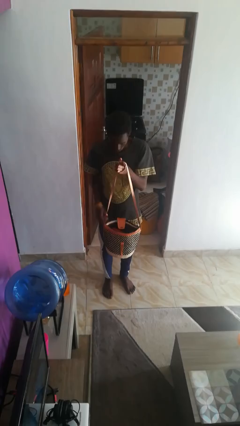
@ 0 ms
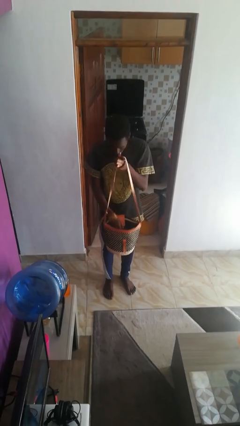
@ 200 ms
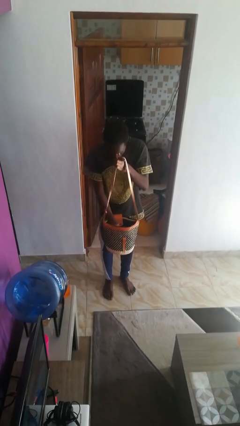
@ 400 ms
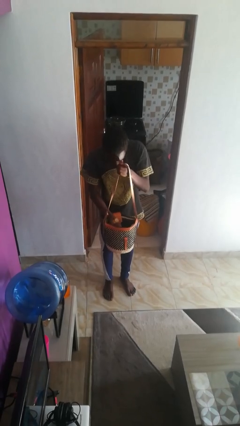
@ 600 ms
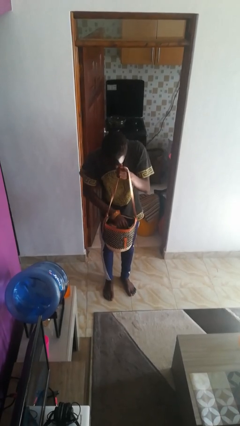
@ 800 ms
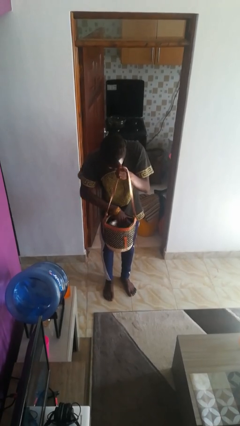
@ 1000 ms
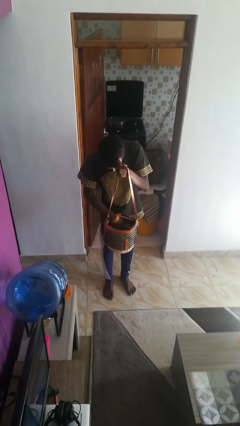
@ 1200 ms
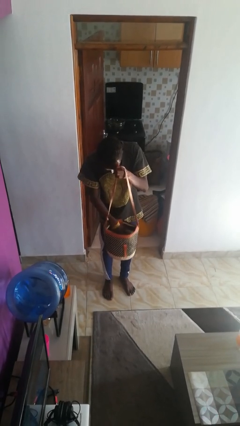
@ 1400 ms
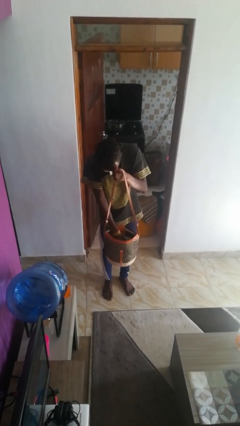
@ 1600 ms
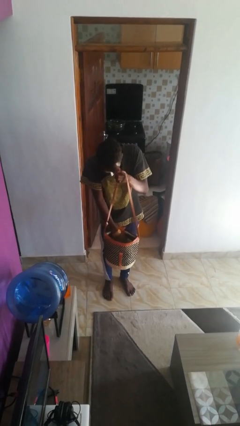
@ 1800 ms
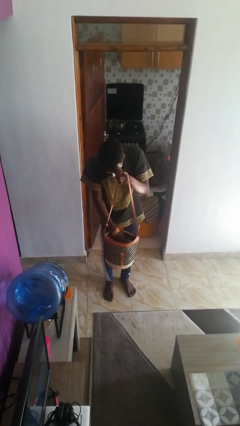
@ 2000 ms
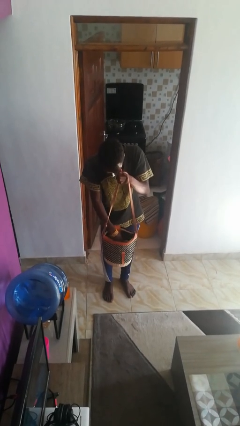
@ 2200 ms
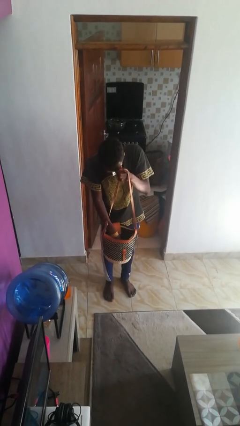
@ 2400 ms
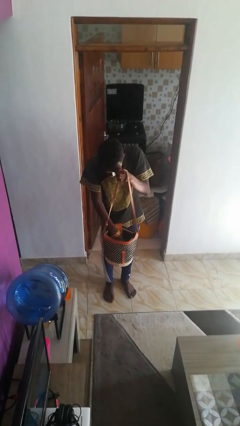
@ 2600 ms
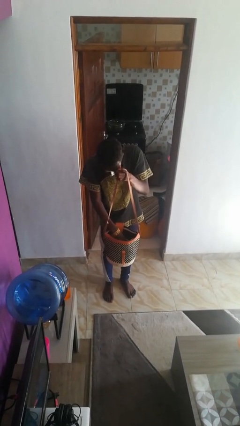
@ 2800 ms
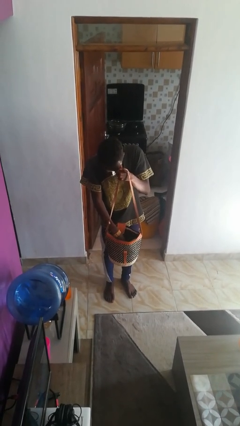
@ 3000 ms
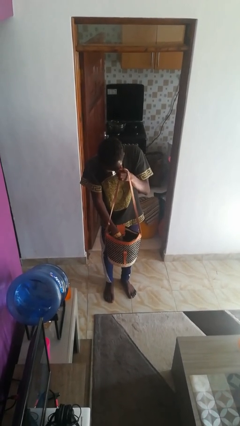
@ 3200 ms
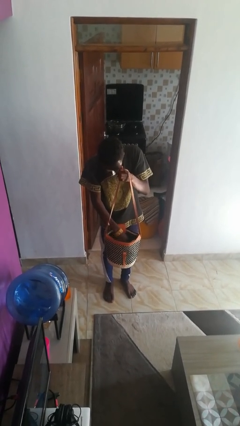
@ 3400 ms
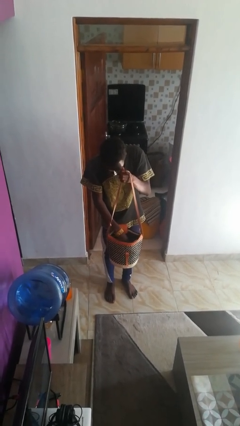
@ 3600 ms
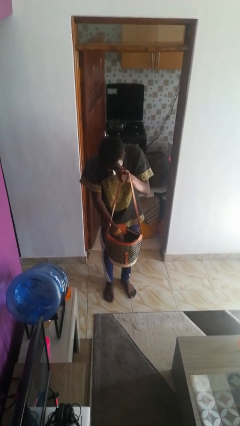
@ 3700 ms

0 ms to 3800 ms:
person searches in purse

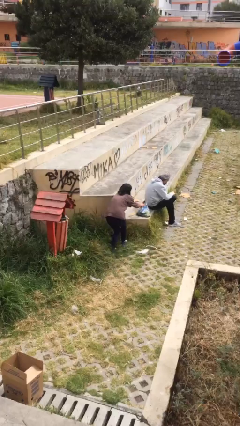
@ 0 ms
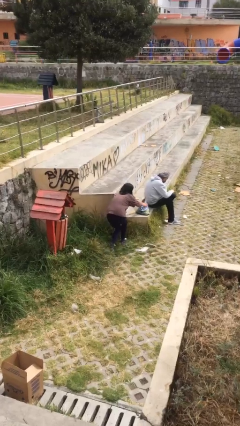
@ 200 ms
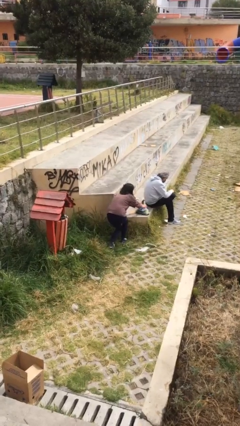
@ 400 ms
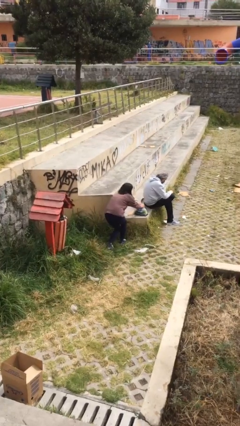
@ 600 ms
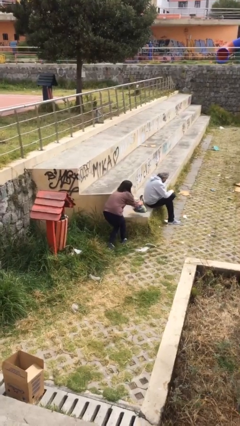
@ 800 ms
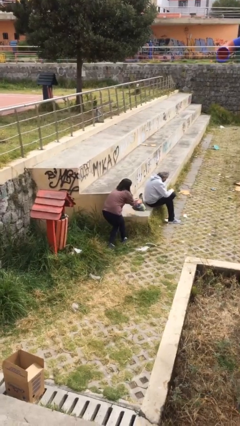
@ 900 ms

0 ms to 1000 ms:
person steals object from person

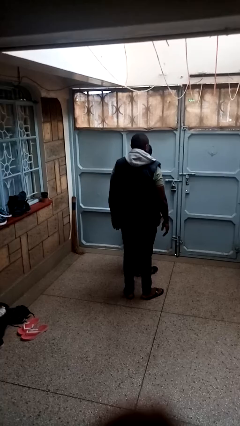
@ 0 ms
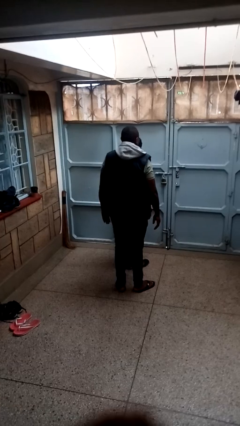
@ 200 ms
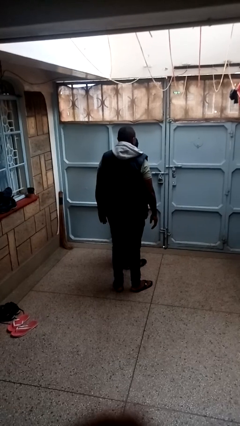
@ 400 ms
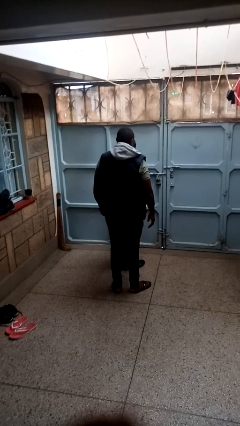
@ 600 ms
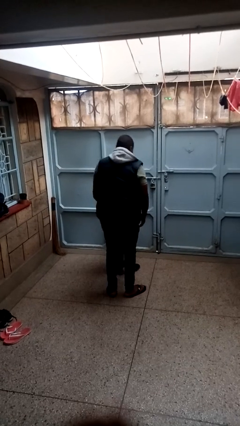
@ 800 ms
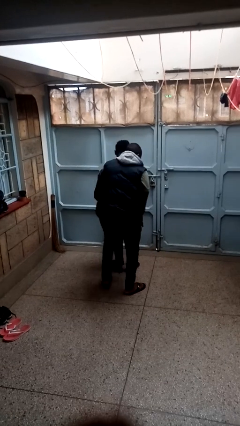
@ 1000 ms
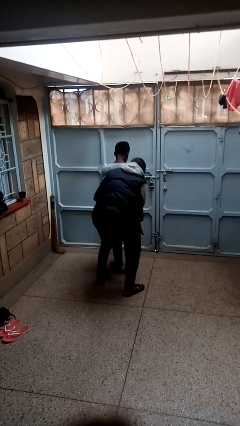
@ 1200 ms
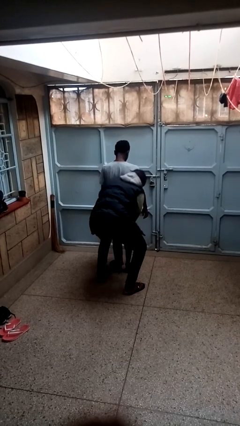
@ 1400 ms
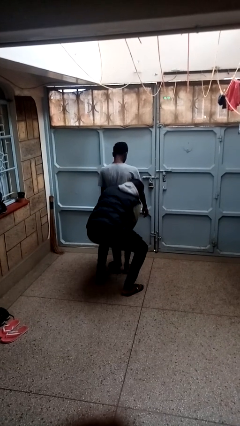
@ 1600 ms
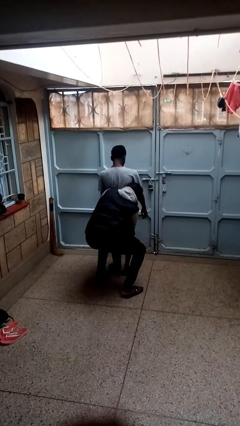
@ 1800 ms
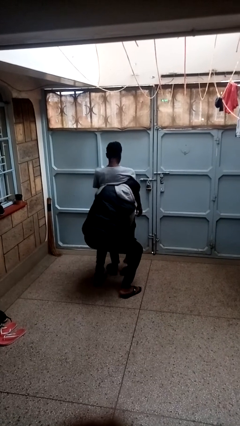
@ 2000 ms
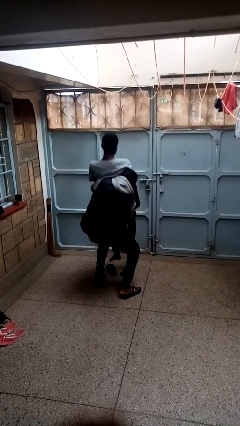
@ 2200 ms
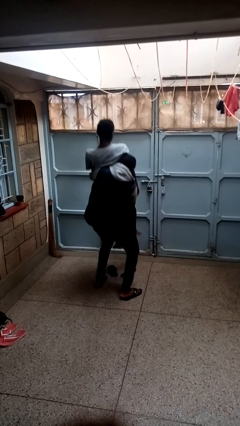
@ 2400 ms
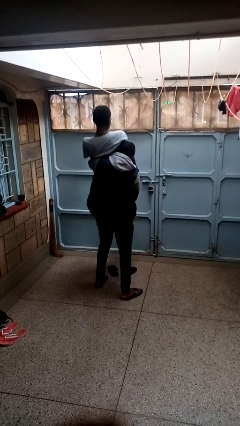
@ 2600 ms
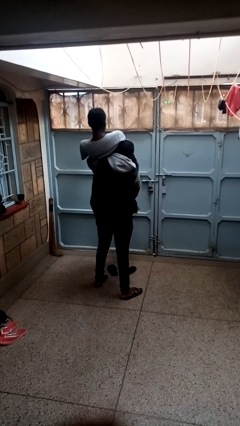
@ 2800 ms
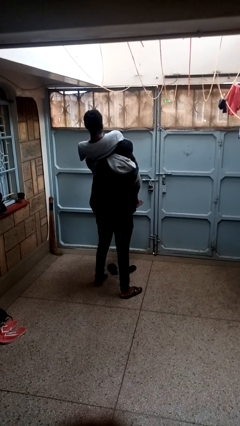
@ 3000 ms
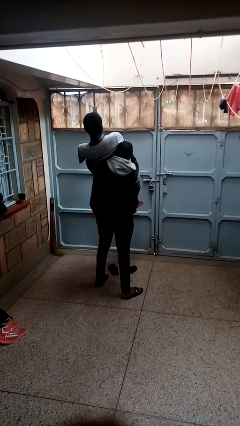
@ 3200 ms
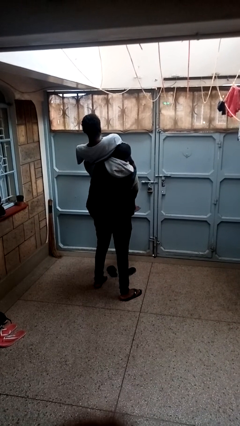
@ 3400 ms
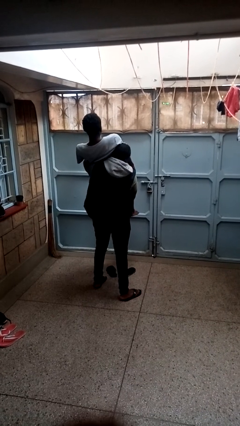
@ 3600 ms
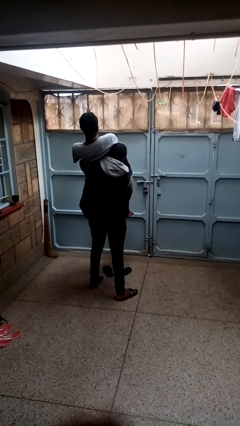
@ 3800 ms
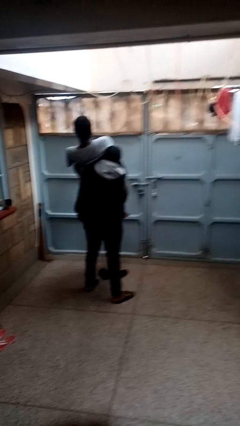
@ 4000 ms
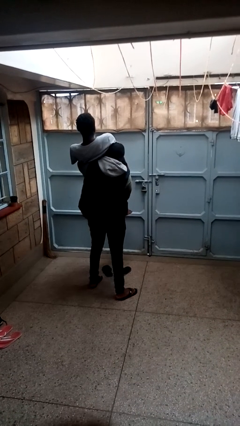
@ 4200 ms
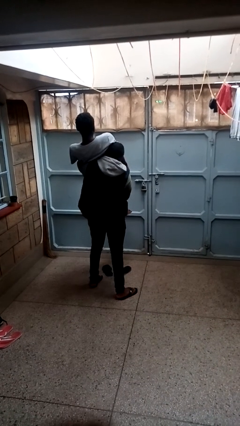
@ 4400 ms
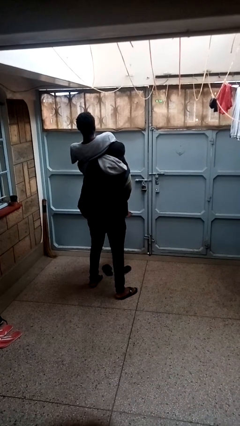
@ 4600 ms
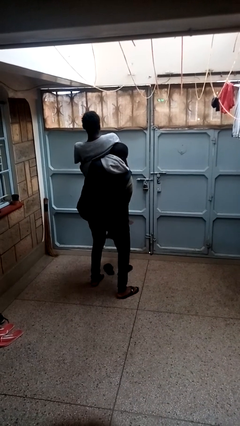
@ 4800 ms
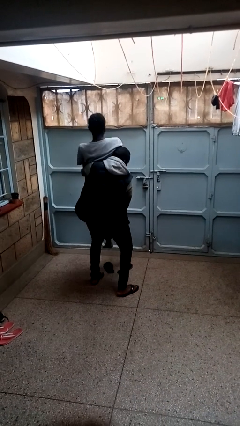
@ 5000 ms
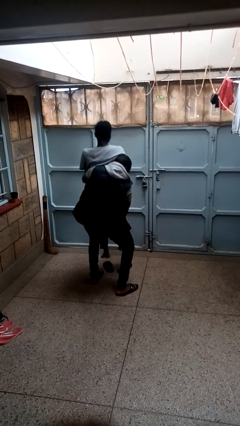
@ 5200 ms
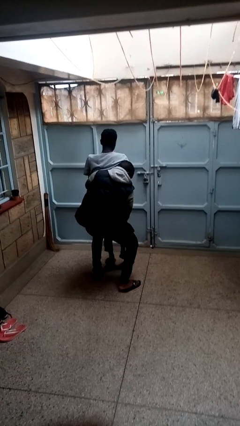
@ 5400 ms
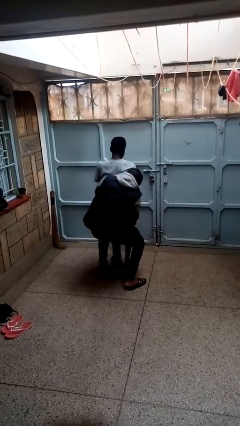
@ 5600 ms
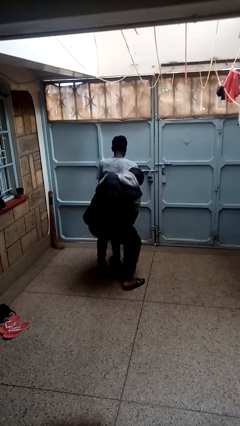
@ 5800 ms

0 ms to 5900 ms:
person carries person over shoulder

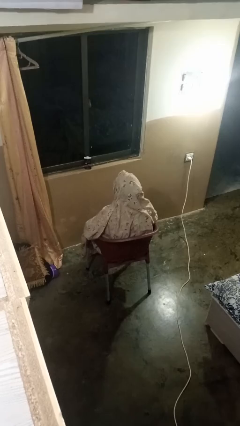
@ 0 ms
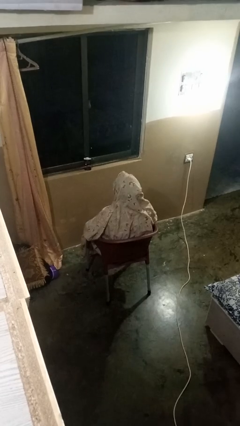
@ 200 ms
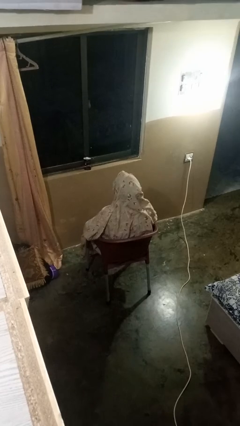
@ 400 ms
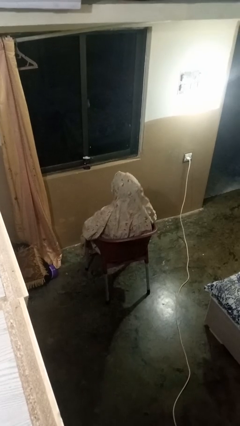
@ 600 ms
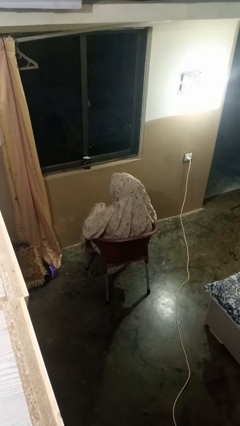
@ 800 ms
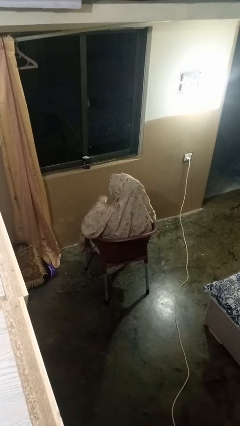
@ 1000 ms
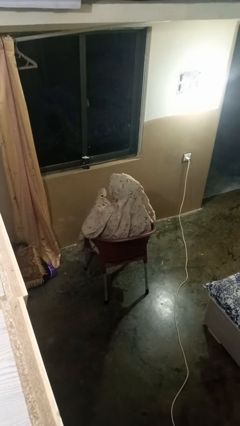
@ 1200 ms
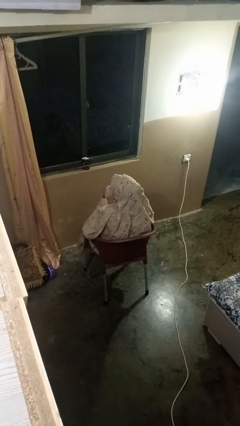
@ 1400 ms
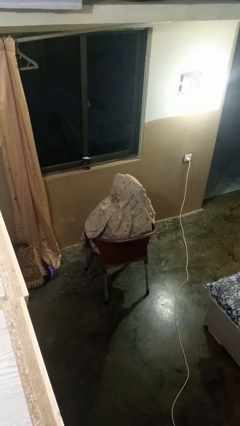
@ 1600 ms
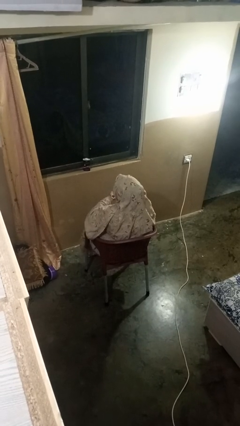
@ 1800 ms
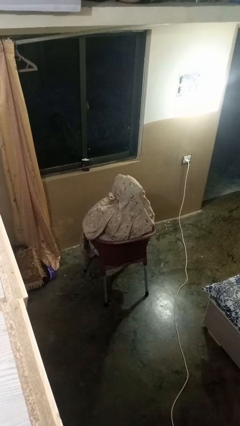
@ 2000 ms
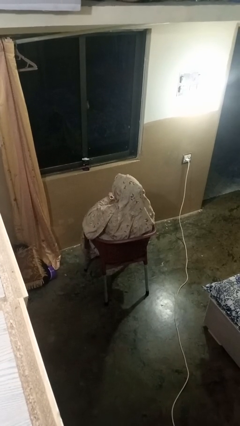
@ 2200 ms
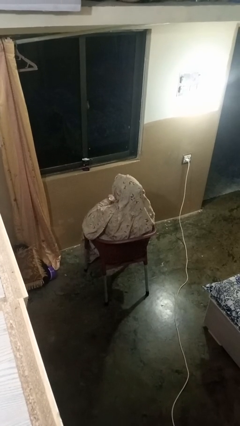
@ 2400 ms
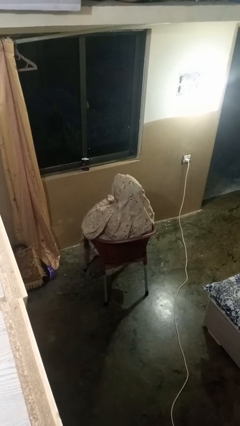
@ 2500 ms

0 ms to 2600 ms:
person looks at wristwatch

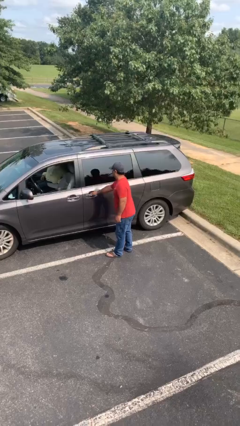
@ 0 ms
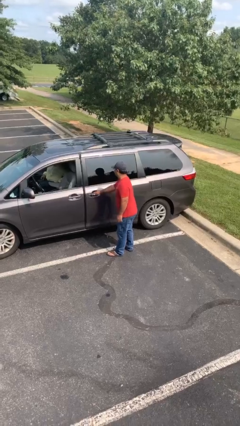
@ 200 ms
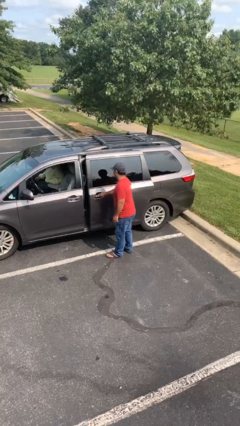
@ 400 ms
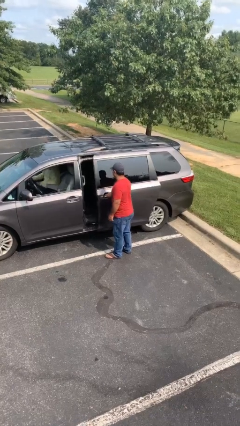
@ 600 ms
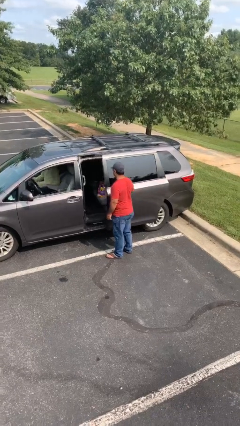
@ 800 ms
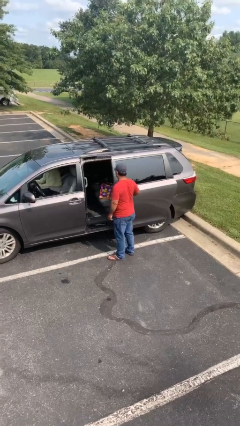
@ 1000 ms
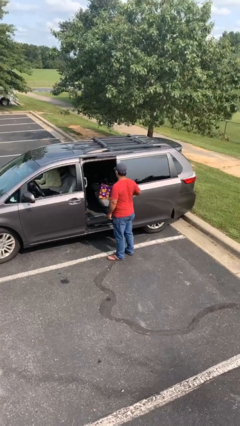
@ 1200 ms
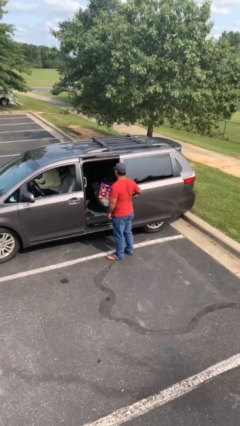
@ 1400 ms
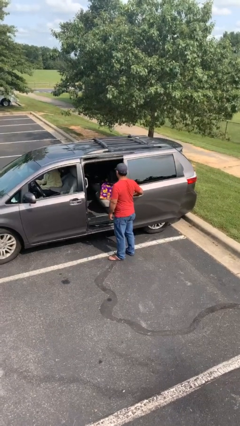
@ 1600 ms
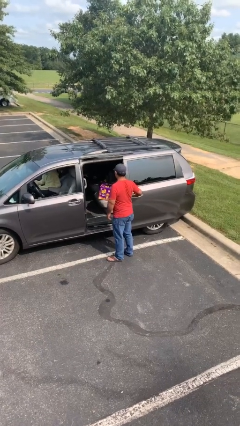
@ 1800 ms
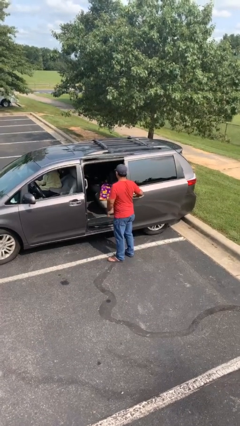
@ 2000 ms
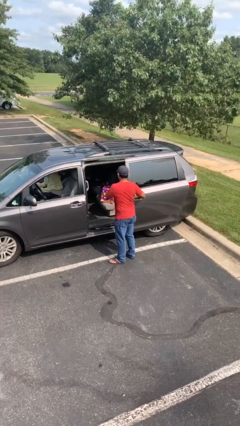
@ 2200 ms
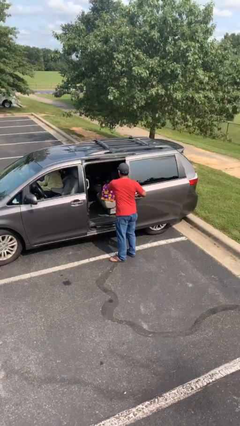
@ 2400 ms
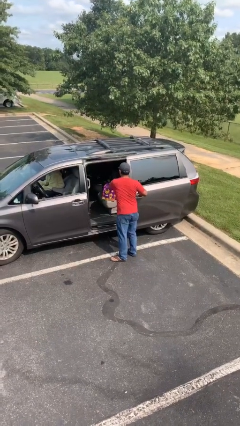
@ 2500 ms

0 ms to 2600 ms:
person opens car door

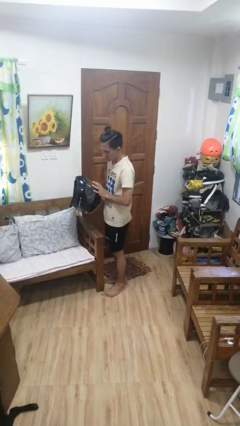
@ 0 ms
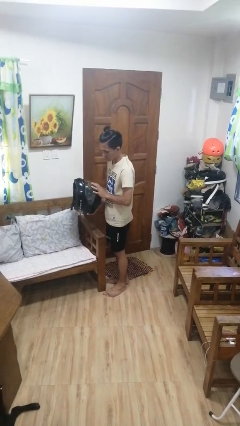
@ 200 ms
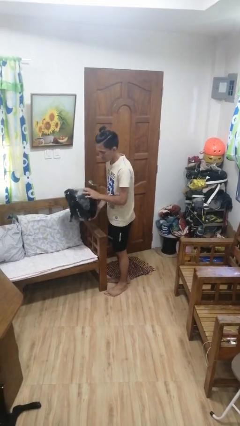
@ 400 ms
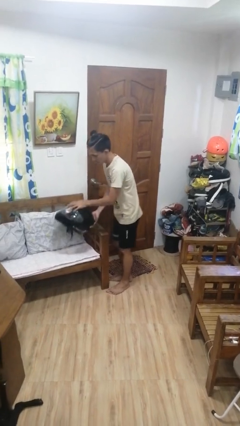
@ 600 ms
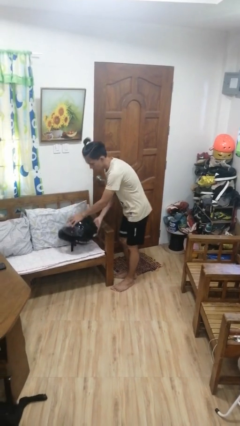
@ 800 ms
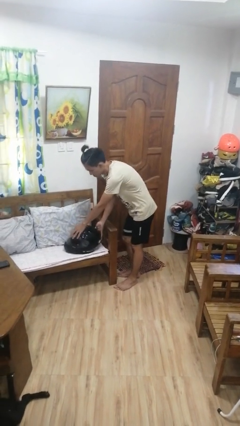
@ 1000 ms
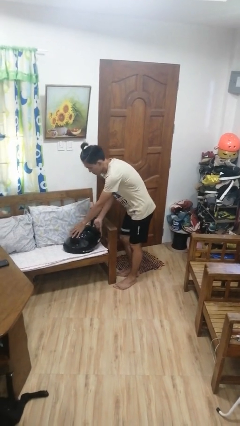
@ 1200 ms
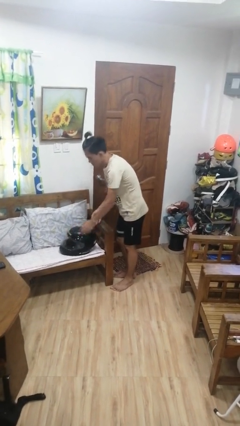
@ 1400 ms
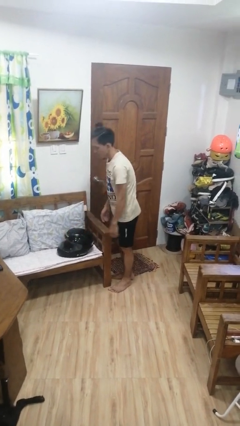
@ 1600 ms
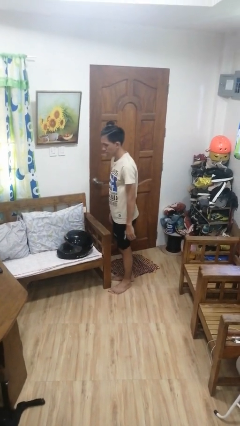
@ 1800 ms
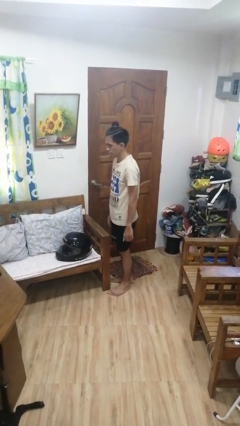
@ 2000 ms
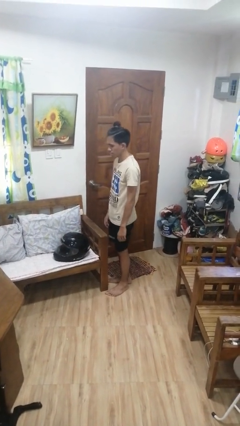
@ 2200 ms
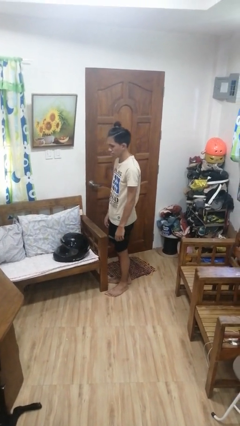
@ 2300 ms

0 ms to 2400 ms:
person puts down object on couch
